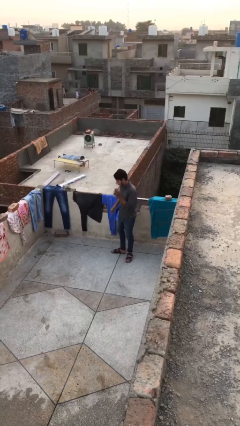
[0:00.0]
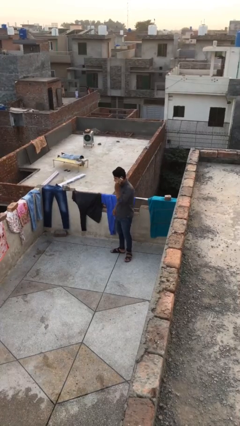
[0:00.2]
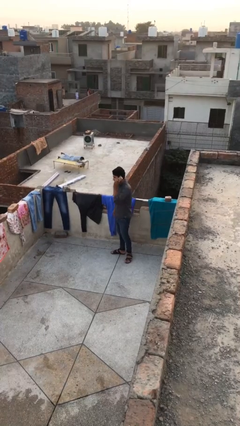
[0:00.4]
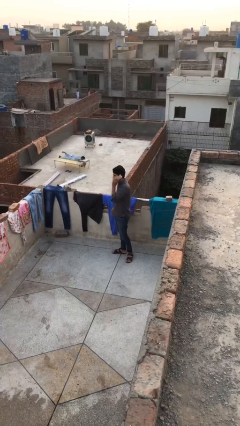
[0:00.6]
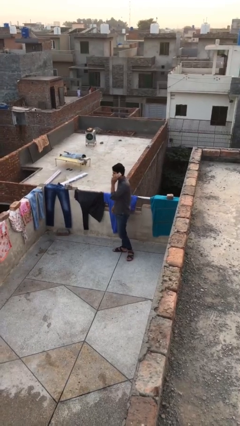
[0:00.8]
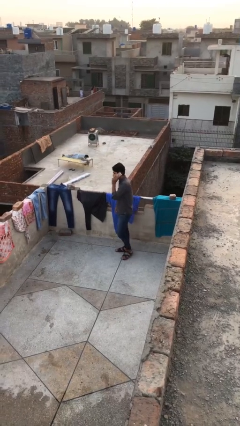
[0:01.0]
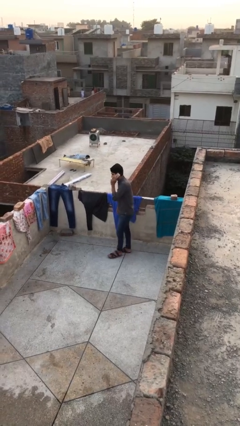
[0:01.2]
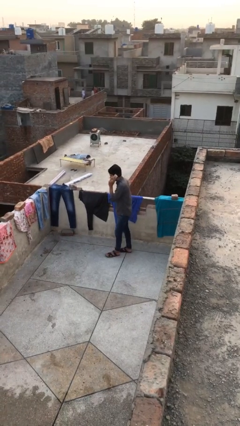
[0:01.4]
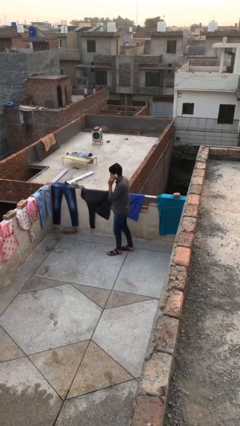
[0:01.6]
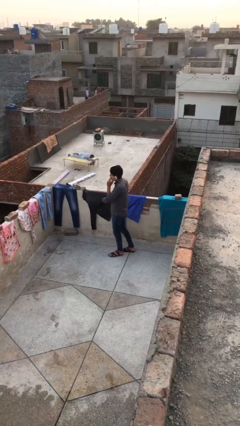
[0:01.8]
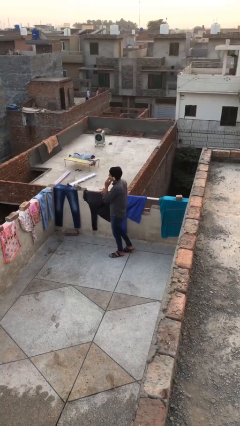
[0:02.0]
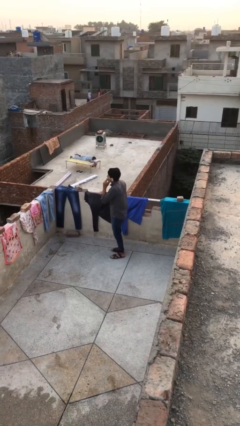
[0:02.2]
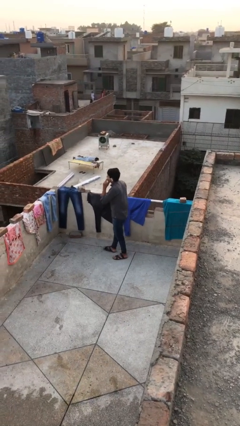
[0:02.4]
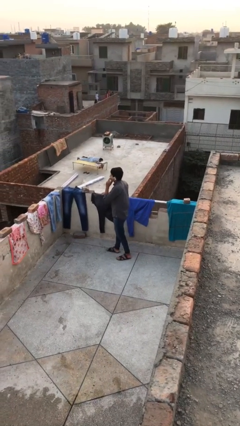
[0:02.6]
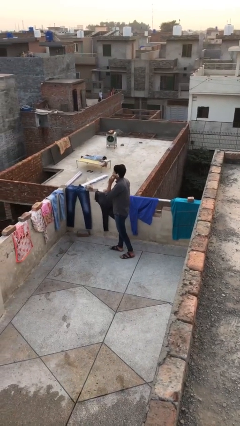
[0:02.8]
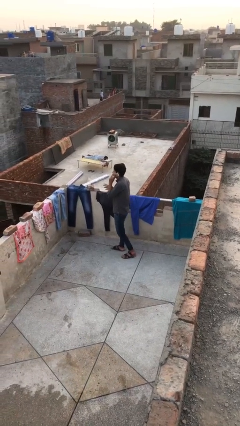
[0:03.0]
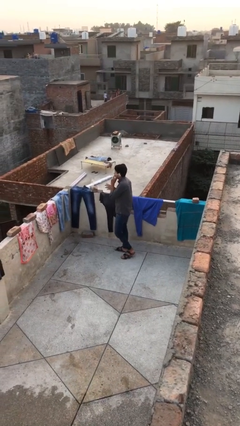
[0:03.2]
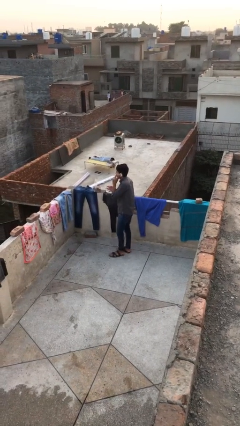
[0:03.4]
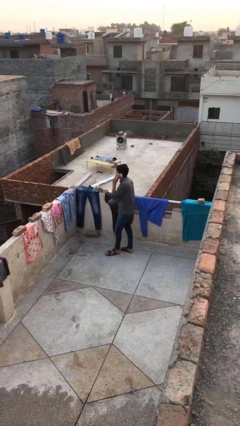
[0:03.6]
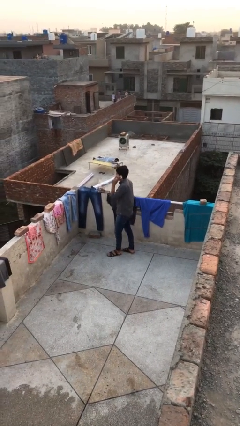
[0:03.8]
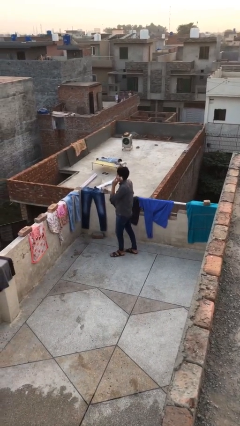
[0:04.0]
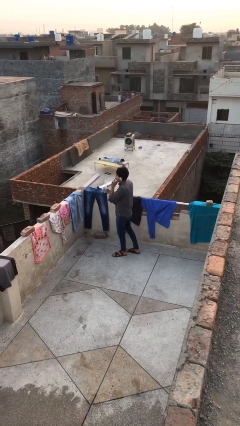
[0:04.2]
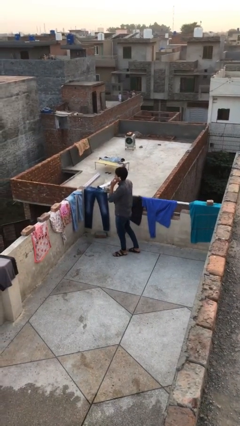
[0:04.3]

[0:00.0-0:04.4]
person talks on phone

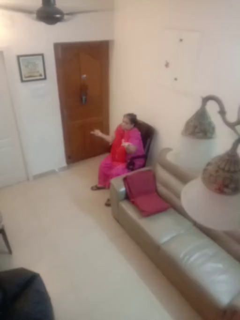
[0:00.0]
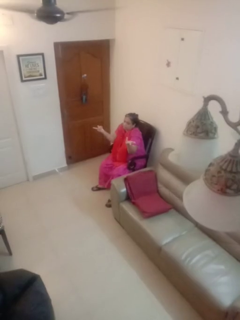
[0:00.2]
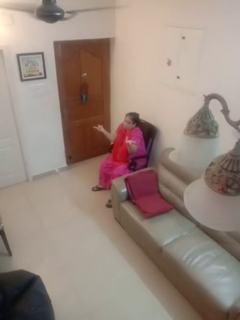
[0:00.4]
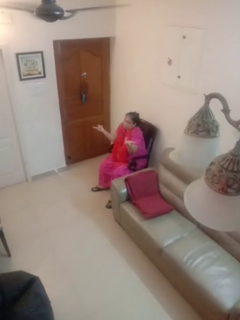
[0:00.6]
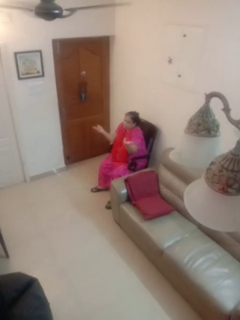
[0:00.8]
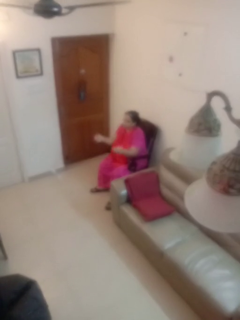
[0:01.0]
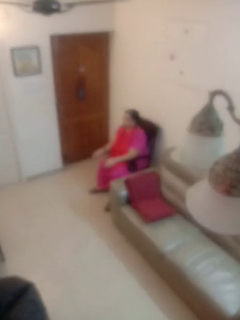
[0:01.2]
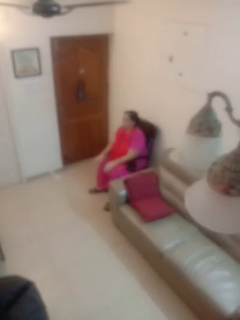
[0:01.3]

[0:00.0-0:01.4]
person shrugs

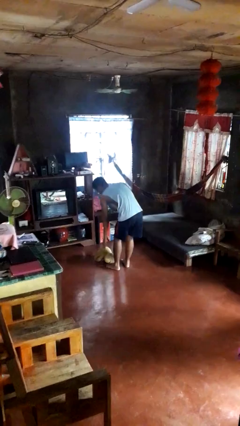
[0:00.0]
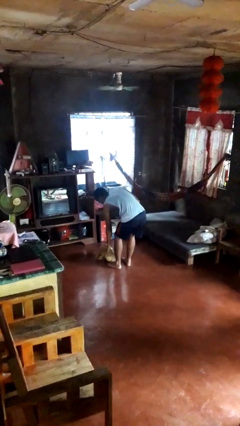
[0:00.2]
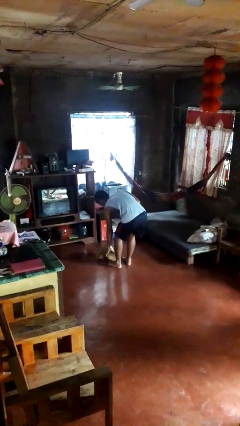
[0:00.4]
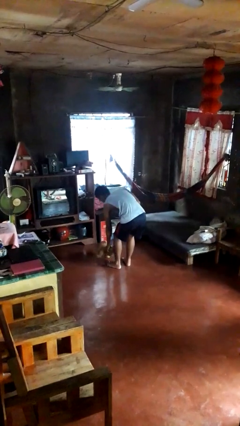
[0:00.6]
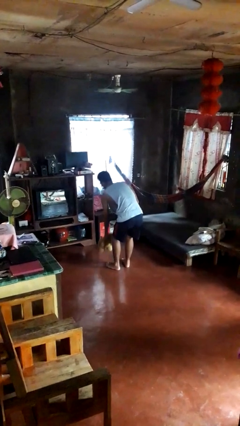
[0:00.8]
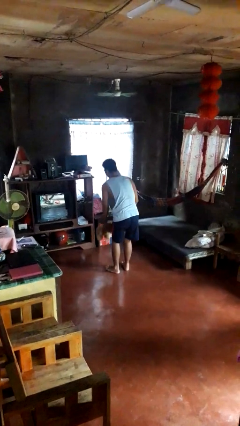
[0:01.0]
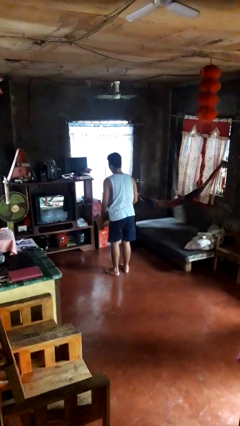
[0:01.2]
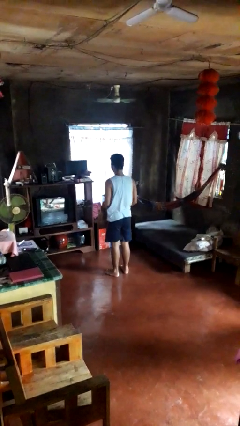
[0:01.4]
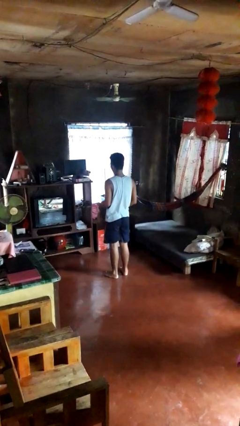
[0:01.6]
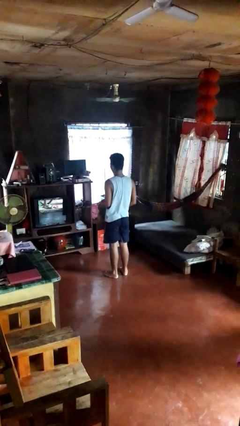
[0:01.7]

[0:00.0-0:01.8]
person picks up object from floor

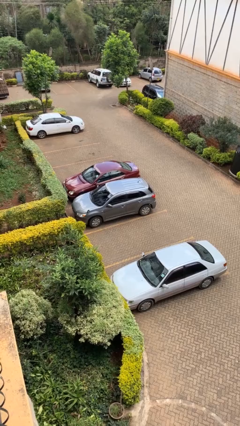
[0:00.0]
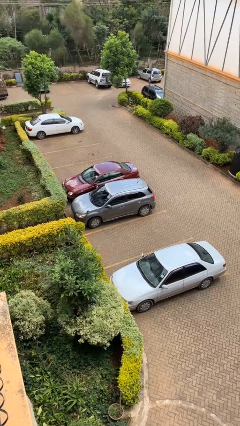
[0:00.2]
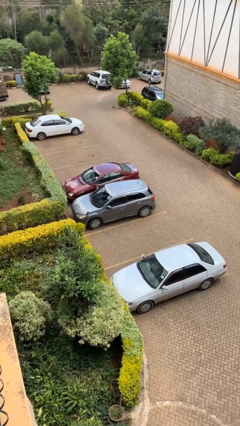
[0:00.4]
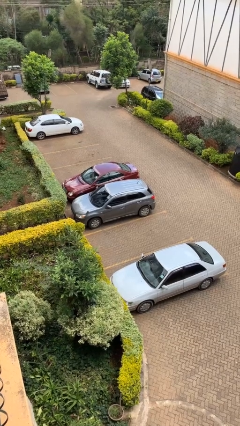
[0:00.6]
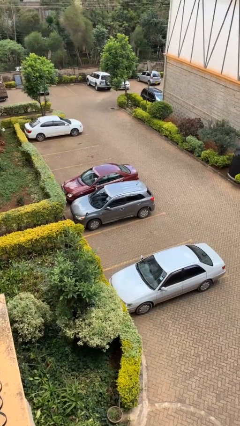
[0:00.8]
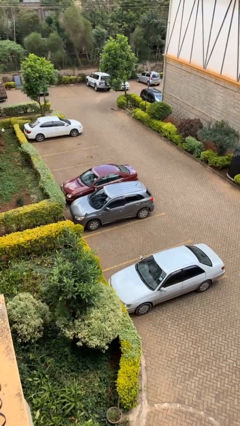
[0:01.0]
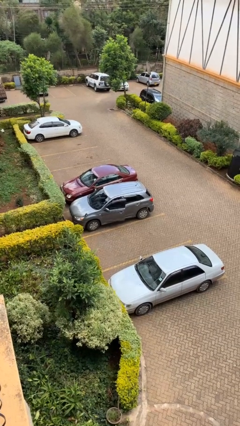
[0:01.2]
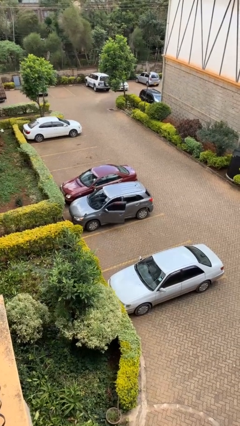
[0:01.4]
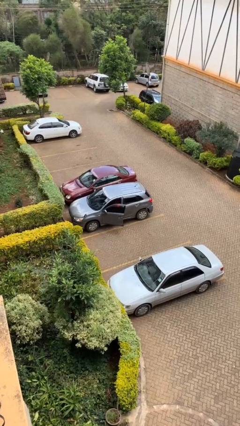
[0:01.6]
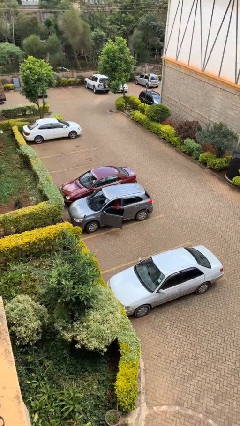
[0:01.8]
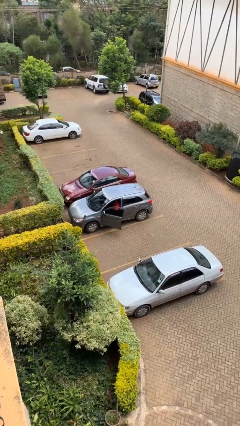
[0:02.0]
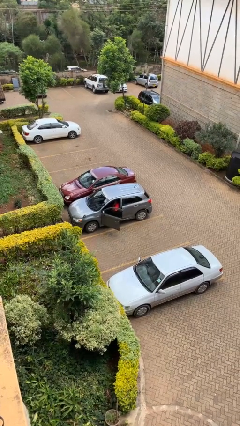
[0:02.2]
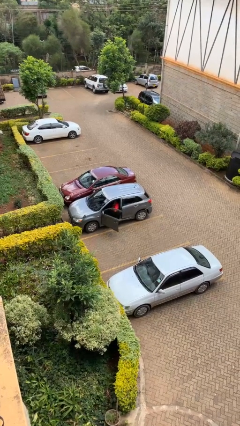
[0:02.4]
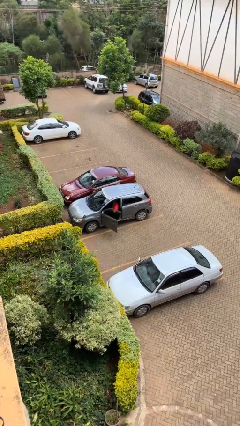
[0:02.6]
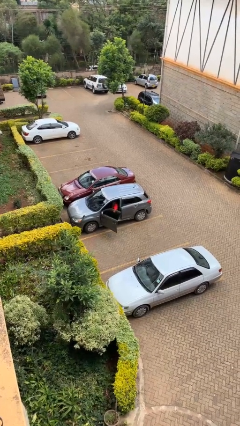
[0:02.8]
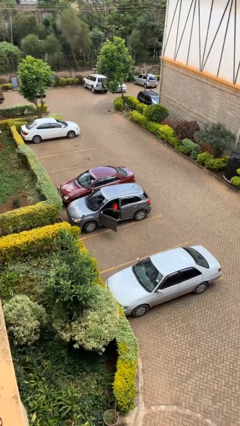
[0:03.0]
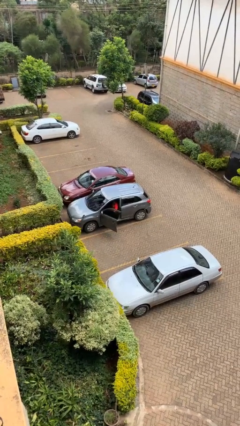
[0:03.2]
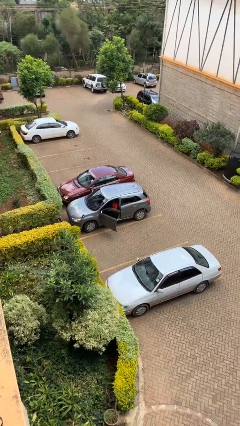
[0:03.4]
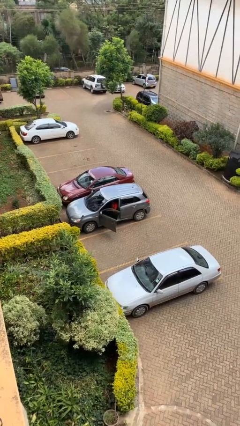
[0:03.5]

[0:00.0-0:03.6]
person opens car door

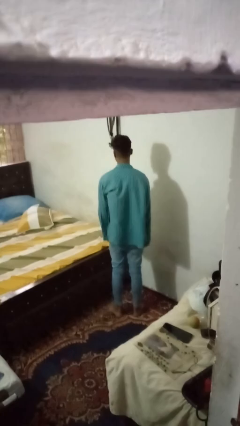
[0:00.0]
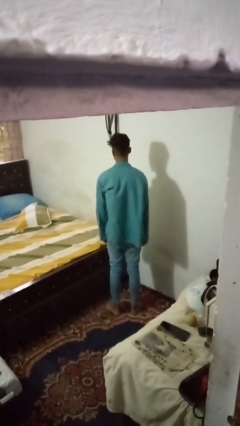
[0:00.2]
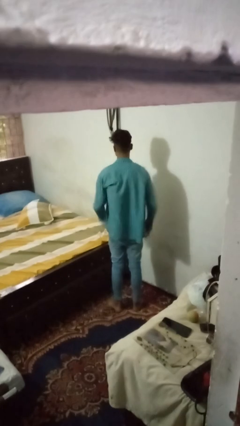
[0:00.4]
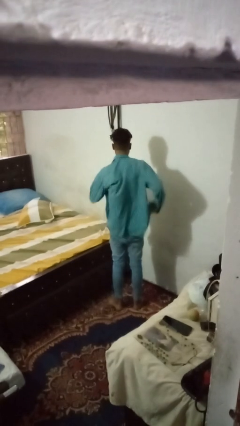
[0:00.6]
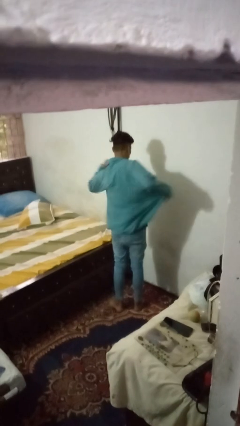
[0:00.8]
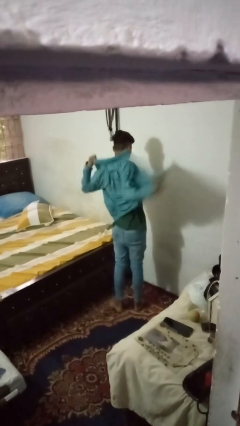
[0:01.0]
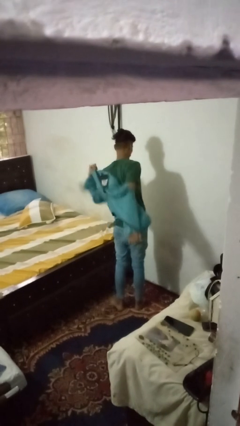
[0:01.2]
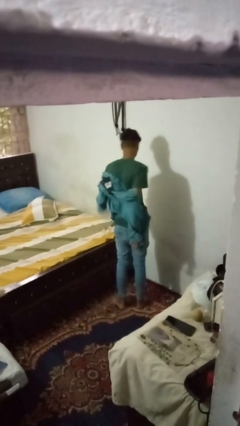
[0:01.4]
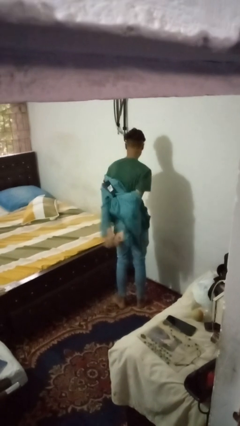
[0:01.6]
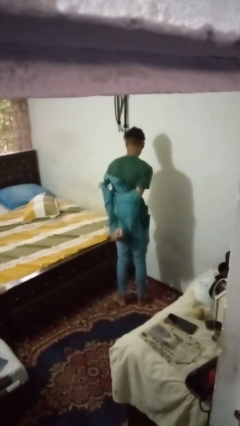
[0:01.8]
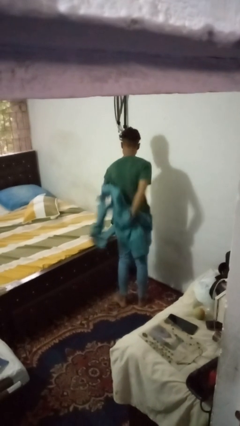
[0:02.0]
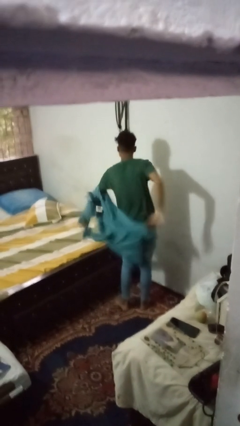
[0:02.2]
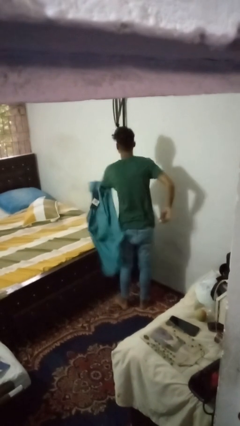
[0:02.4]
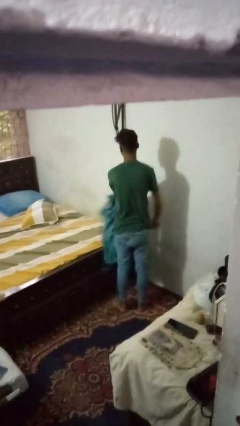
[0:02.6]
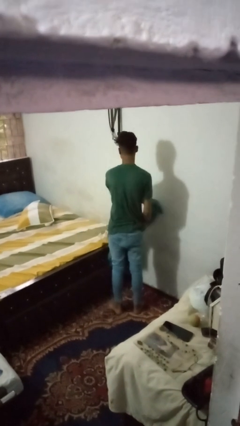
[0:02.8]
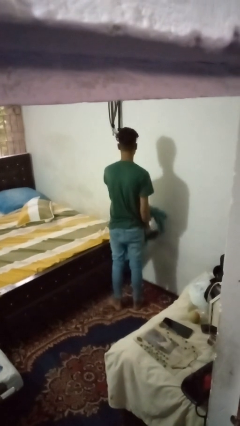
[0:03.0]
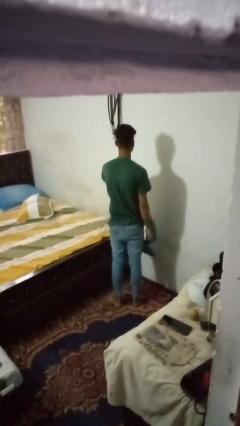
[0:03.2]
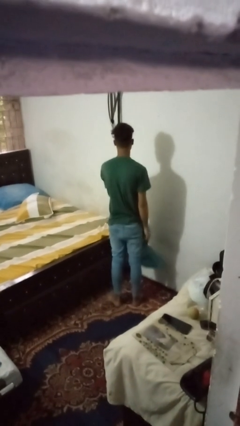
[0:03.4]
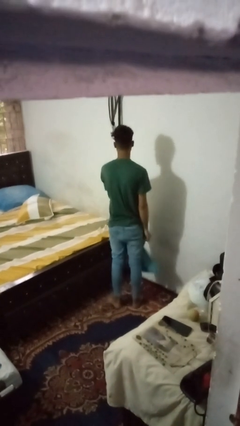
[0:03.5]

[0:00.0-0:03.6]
person takes off shirt

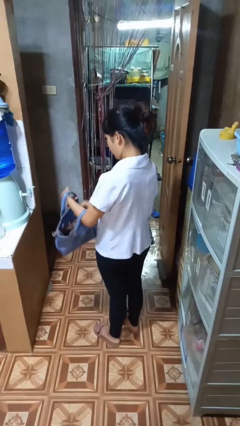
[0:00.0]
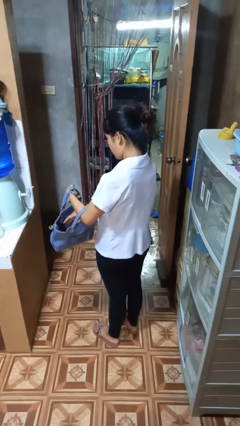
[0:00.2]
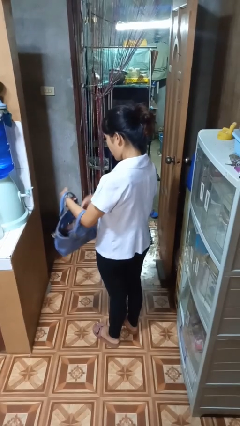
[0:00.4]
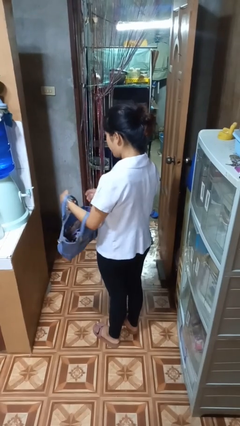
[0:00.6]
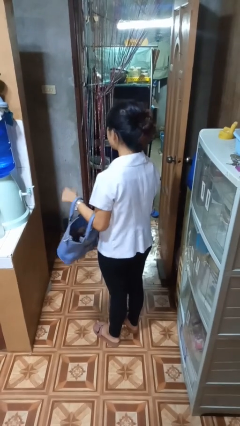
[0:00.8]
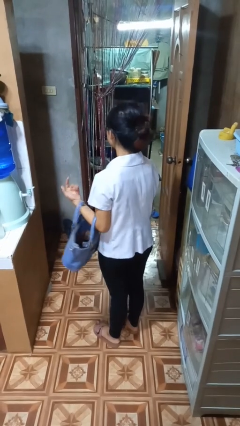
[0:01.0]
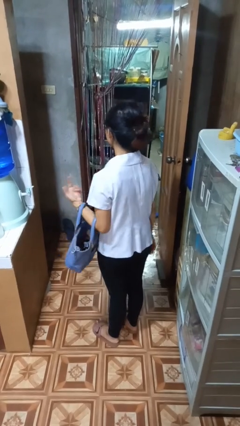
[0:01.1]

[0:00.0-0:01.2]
person puts object into purse

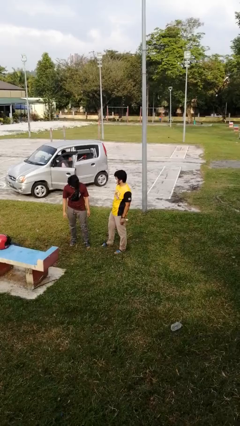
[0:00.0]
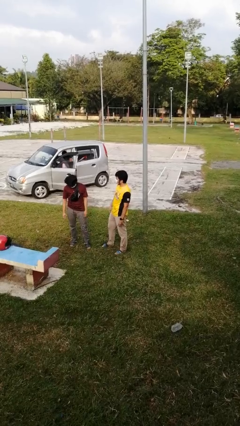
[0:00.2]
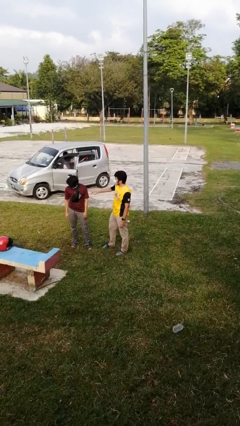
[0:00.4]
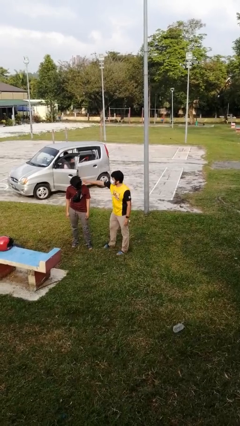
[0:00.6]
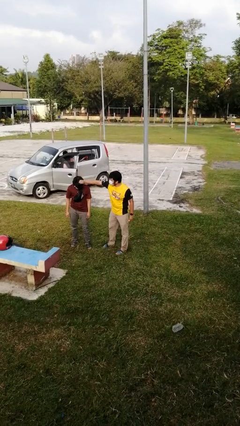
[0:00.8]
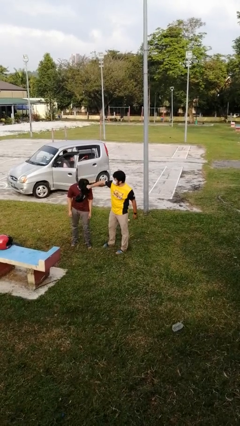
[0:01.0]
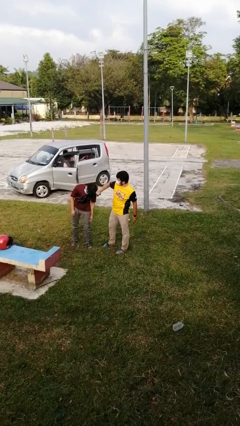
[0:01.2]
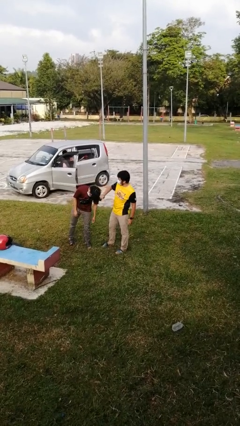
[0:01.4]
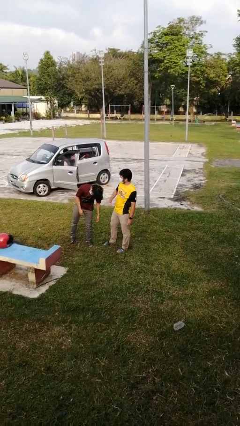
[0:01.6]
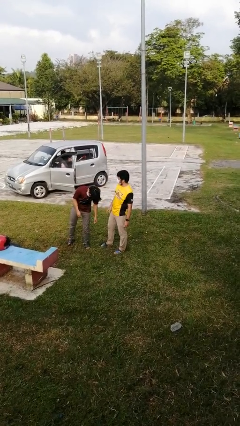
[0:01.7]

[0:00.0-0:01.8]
person grabs person by hair
